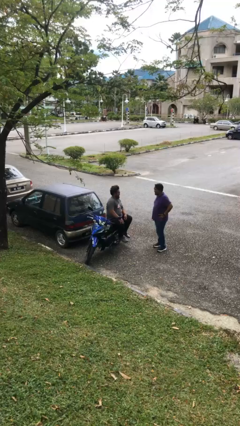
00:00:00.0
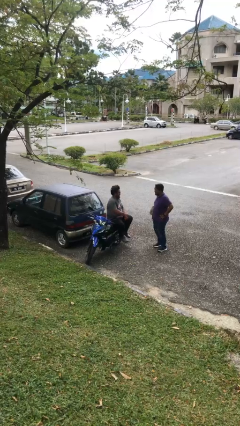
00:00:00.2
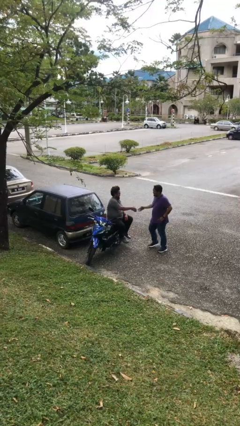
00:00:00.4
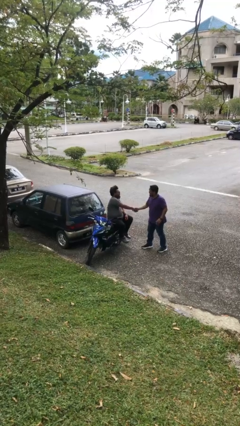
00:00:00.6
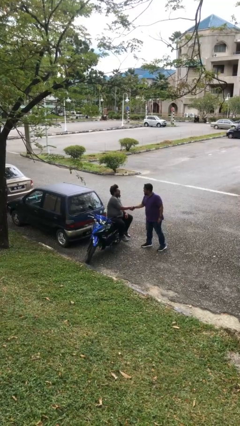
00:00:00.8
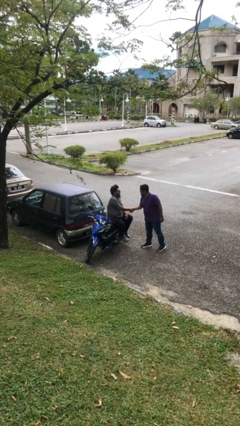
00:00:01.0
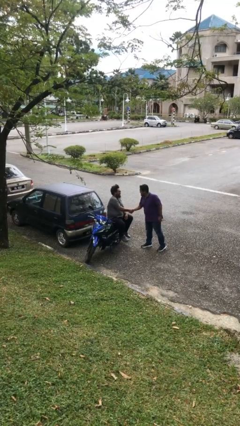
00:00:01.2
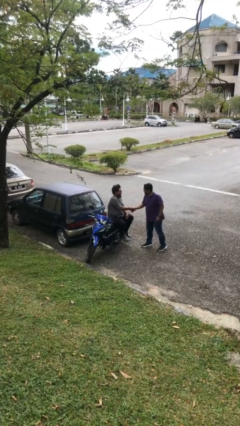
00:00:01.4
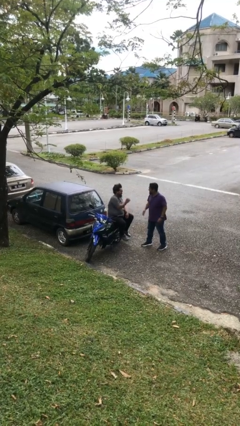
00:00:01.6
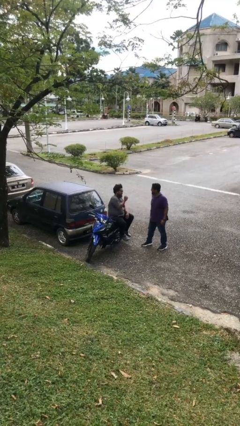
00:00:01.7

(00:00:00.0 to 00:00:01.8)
person shakes hand

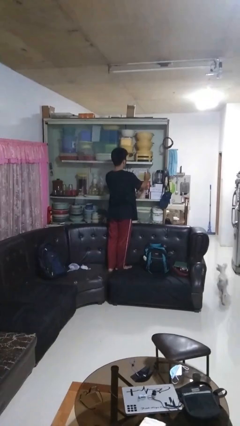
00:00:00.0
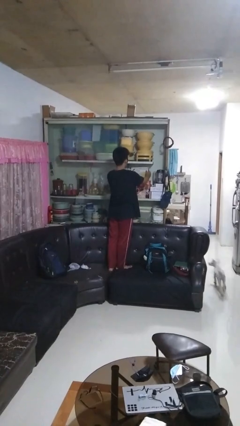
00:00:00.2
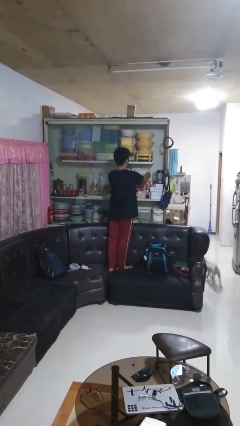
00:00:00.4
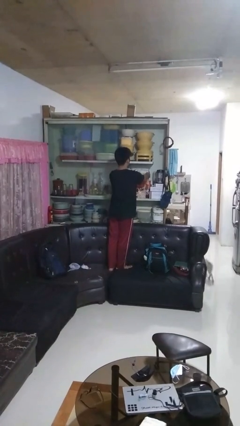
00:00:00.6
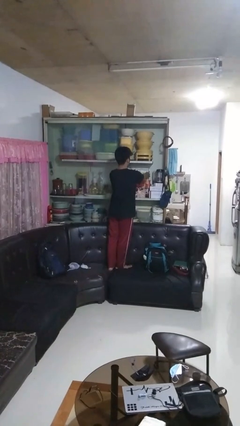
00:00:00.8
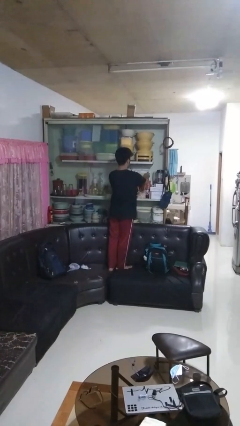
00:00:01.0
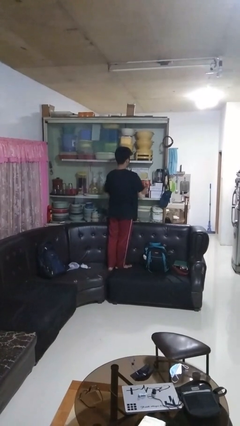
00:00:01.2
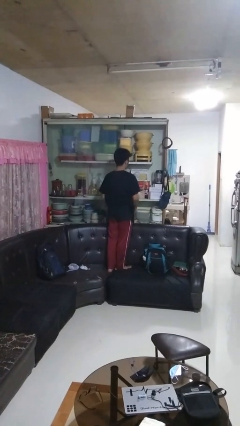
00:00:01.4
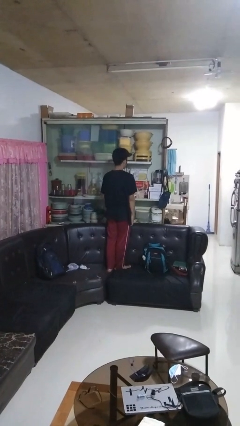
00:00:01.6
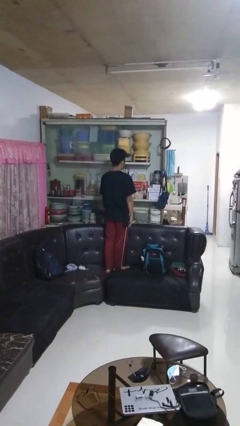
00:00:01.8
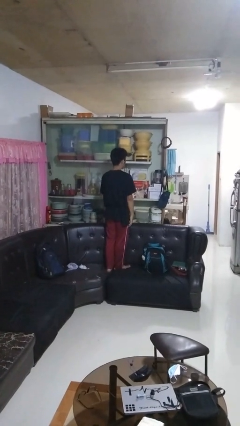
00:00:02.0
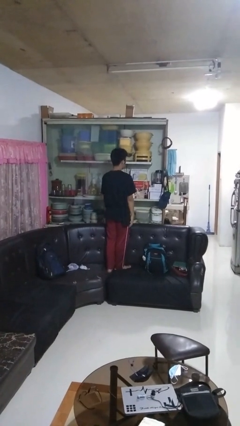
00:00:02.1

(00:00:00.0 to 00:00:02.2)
person puts down object into cabinet

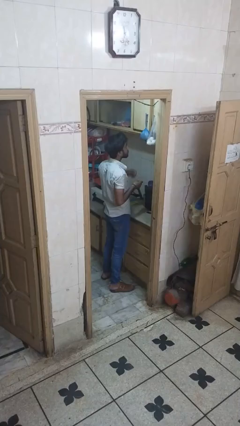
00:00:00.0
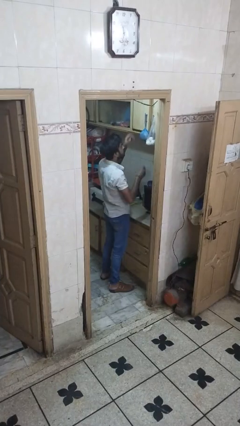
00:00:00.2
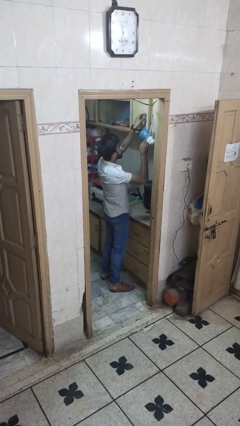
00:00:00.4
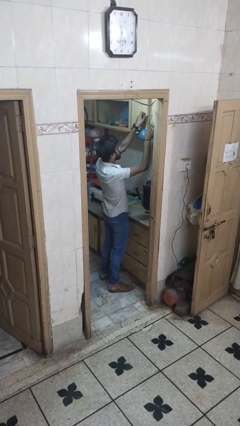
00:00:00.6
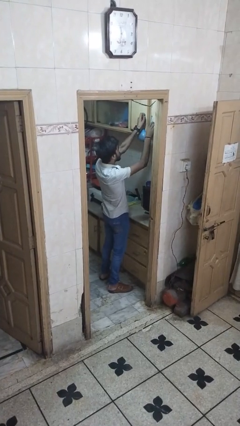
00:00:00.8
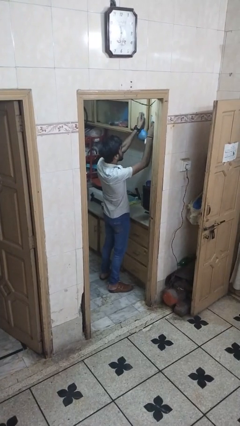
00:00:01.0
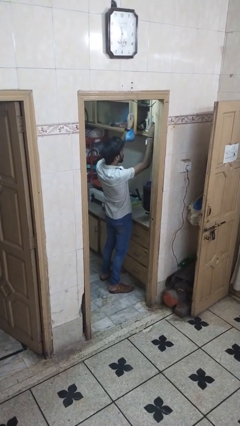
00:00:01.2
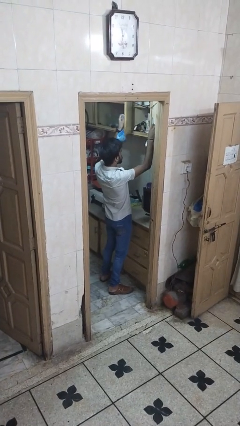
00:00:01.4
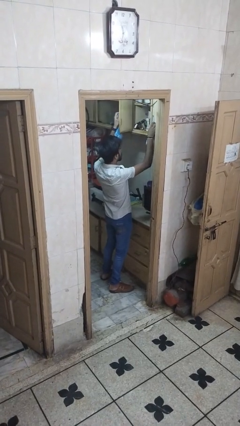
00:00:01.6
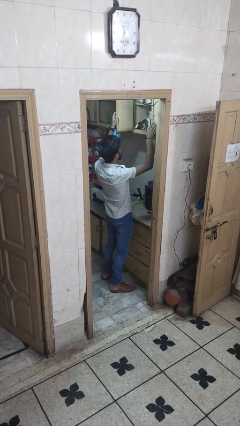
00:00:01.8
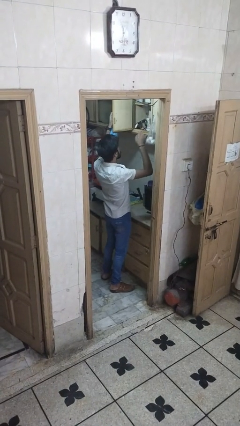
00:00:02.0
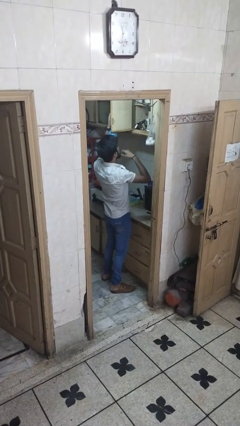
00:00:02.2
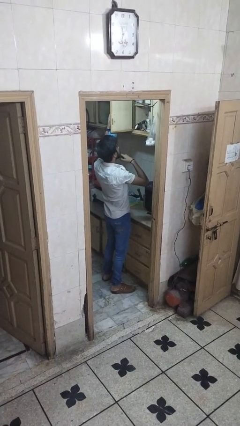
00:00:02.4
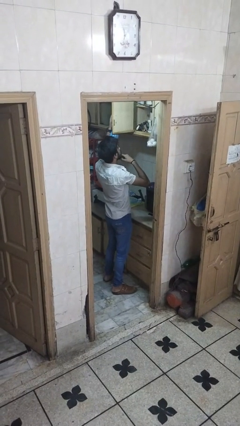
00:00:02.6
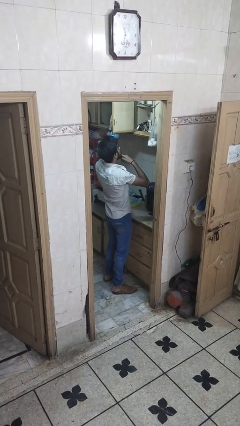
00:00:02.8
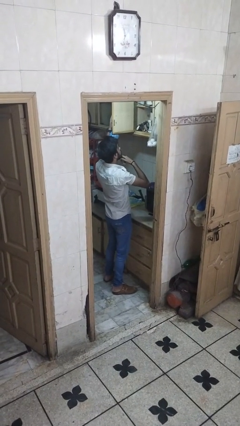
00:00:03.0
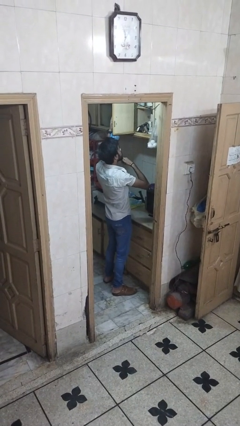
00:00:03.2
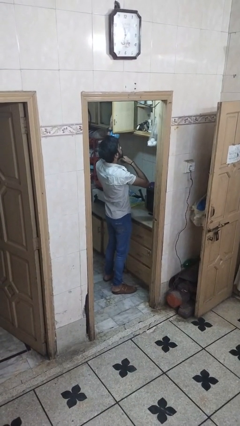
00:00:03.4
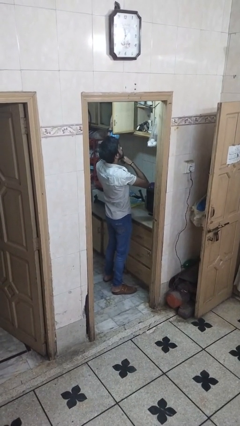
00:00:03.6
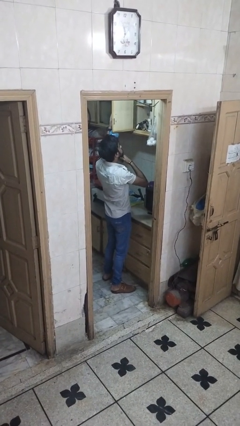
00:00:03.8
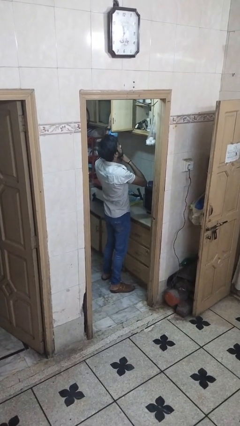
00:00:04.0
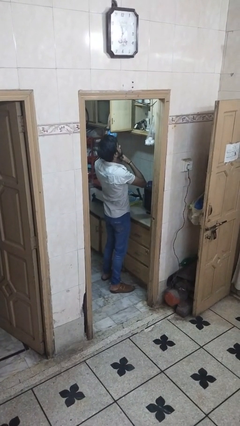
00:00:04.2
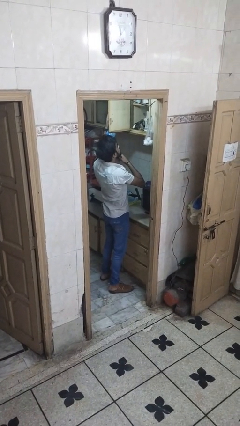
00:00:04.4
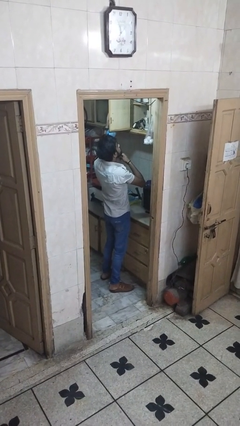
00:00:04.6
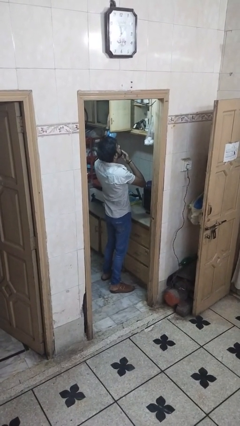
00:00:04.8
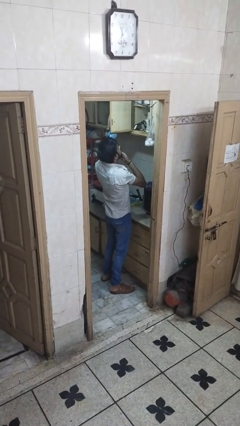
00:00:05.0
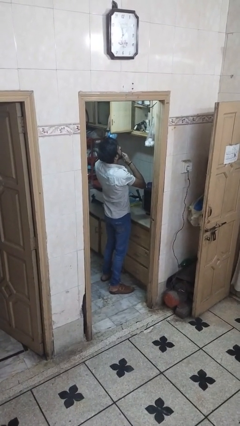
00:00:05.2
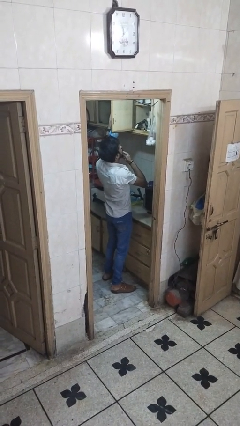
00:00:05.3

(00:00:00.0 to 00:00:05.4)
person opens cabinet

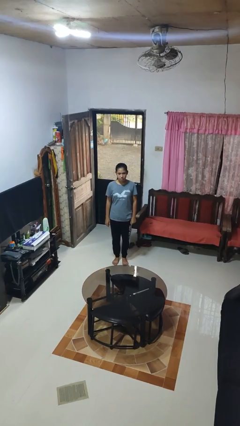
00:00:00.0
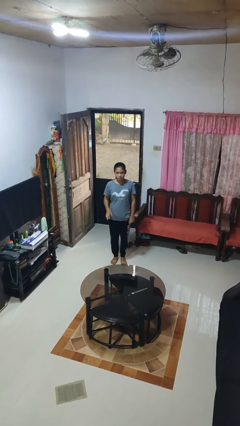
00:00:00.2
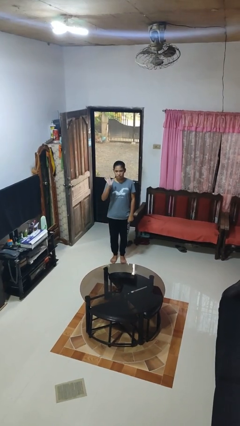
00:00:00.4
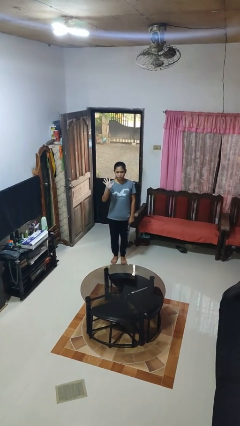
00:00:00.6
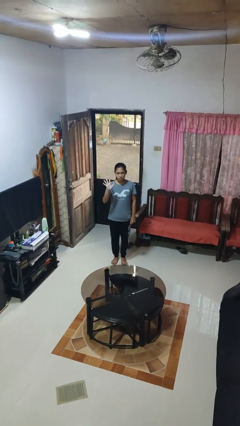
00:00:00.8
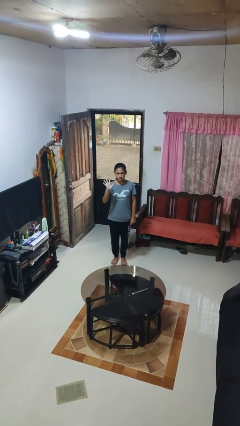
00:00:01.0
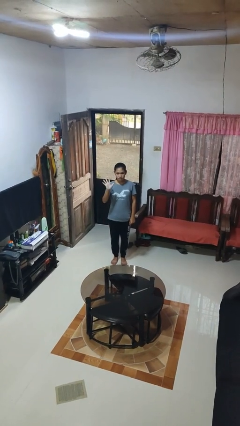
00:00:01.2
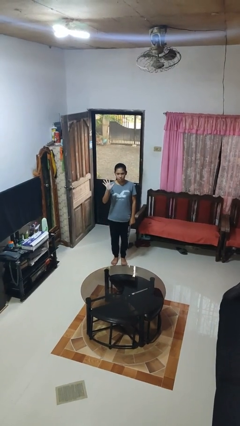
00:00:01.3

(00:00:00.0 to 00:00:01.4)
person gestures number five

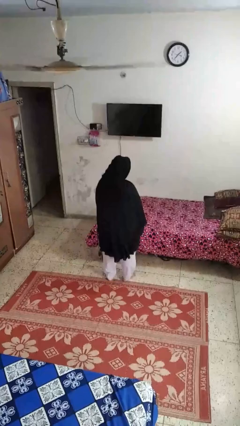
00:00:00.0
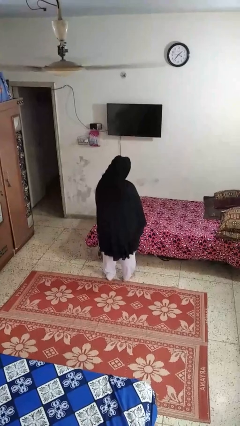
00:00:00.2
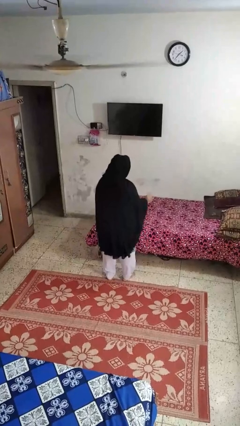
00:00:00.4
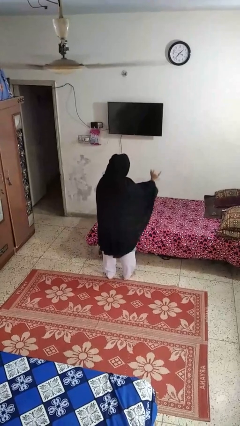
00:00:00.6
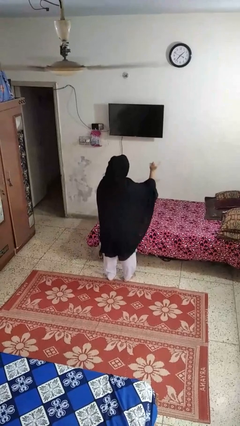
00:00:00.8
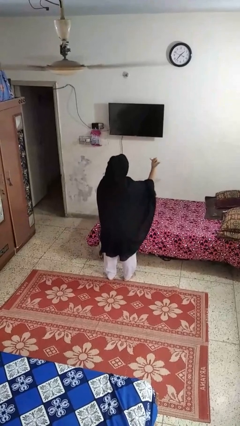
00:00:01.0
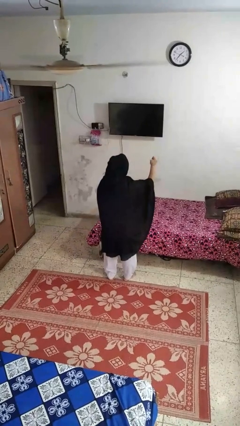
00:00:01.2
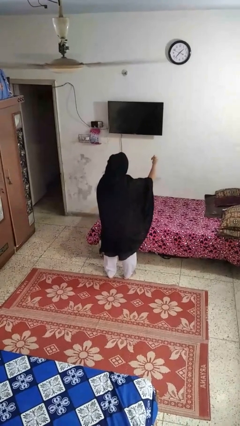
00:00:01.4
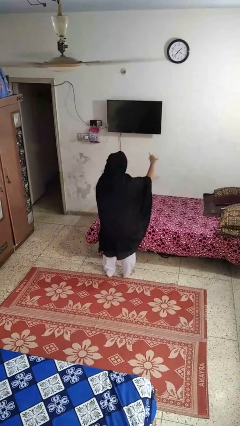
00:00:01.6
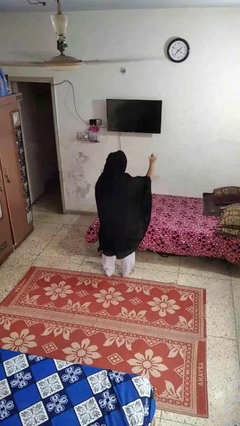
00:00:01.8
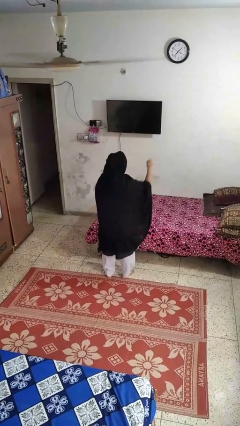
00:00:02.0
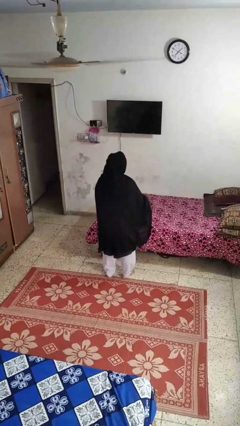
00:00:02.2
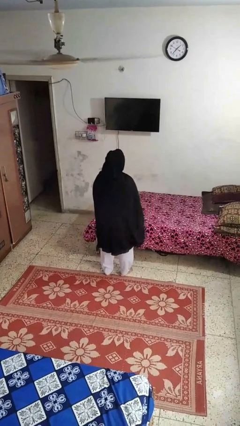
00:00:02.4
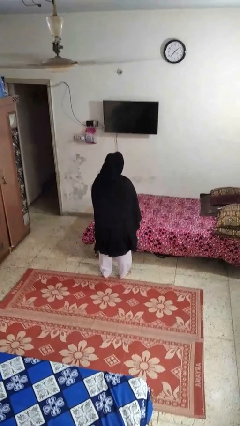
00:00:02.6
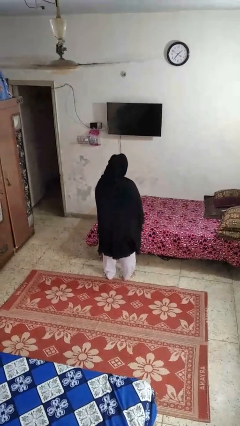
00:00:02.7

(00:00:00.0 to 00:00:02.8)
person gestures hang loose

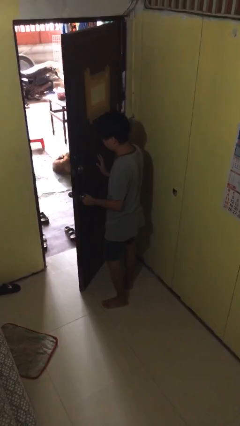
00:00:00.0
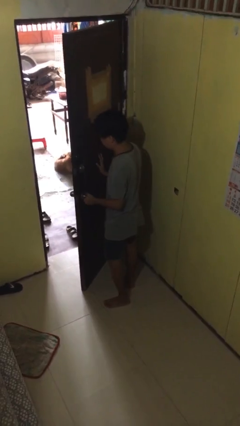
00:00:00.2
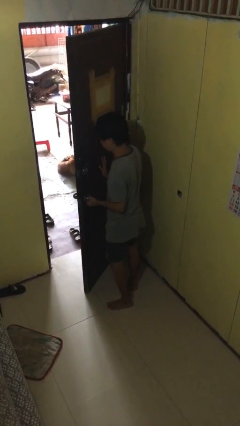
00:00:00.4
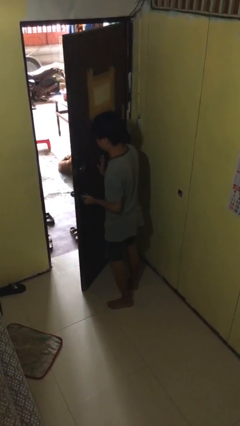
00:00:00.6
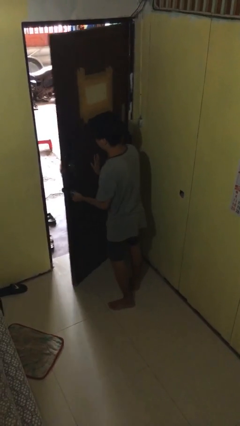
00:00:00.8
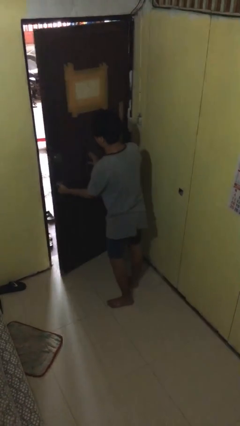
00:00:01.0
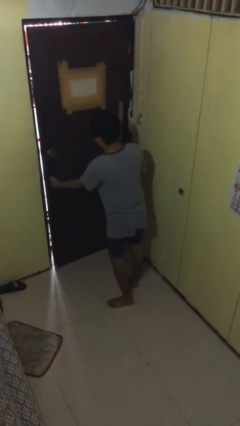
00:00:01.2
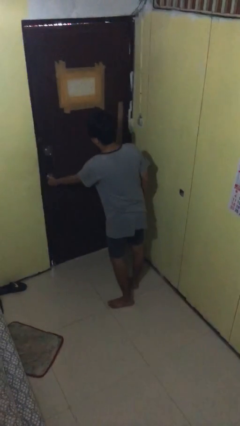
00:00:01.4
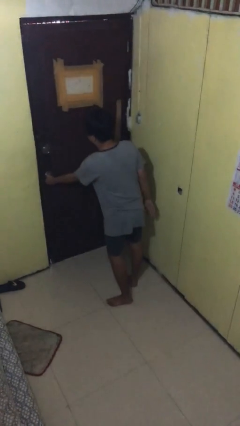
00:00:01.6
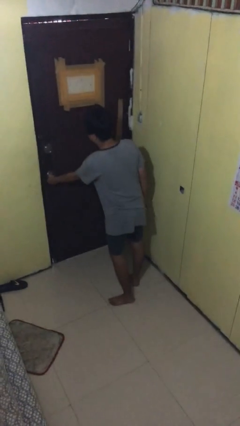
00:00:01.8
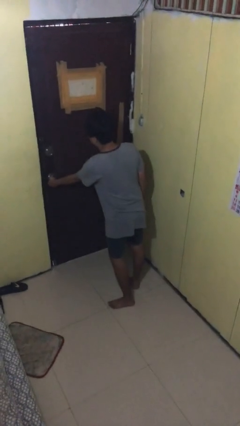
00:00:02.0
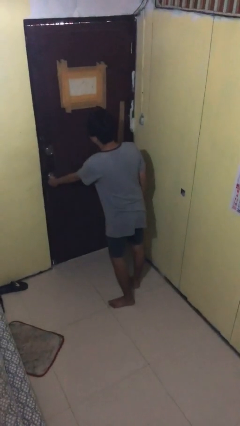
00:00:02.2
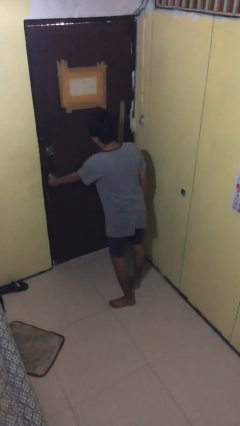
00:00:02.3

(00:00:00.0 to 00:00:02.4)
person closes facility door

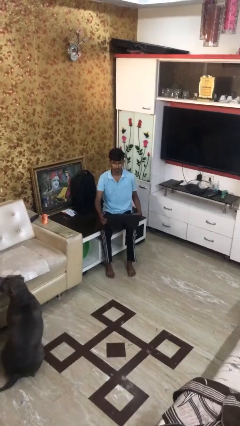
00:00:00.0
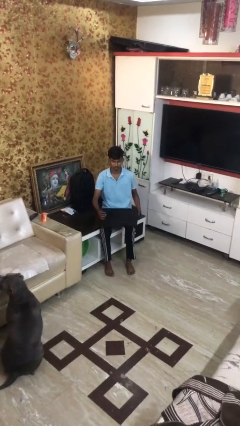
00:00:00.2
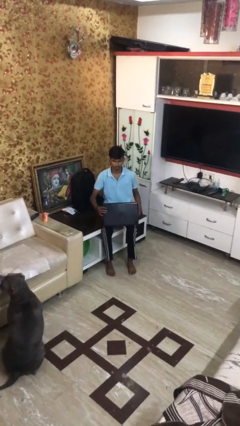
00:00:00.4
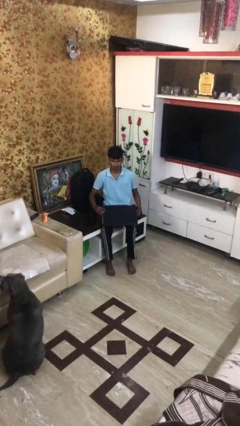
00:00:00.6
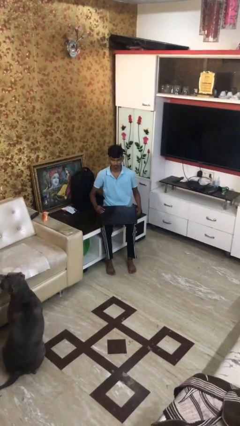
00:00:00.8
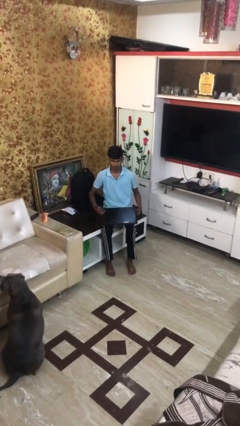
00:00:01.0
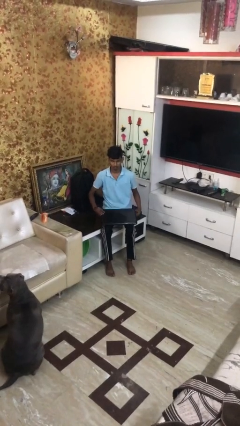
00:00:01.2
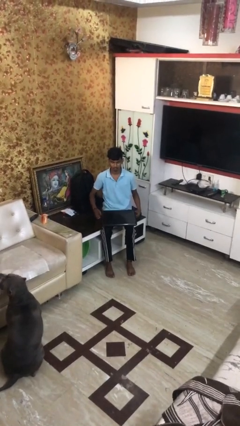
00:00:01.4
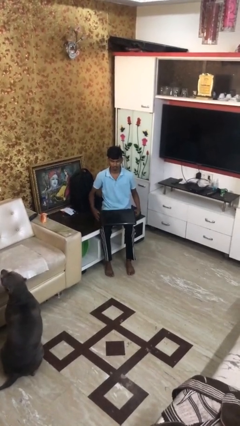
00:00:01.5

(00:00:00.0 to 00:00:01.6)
person closes laptop
